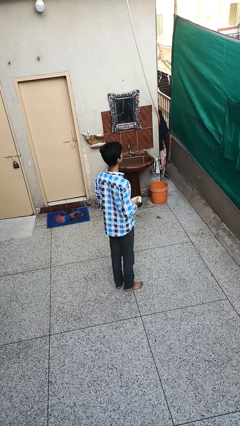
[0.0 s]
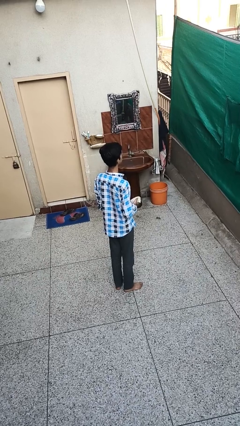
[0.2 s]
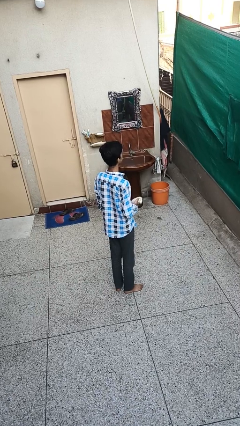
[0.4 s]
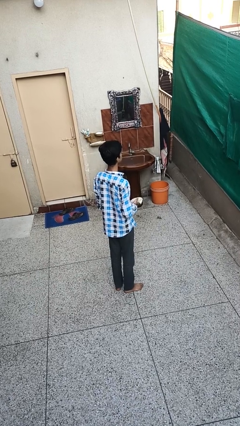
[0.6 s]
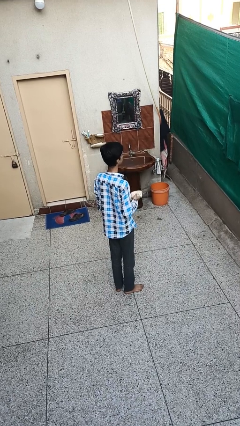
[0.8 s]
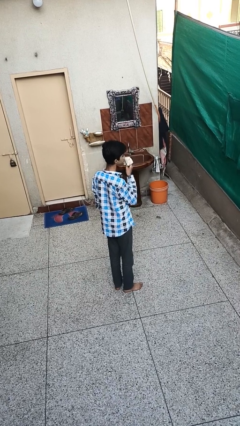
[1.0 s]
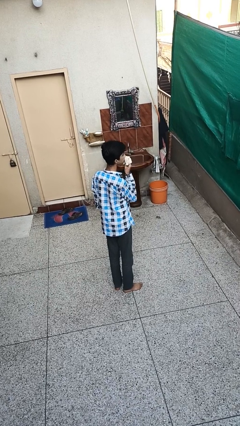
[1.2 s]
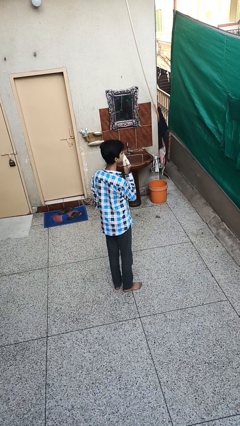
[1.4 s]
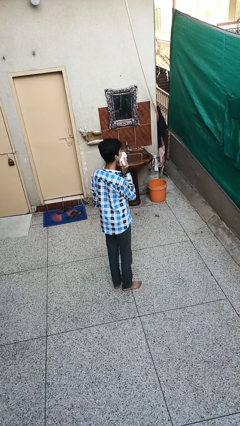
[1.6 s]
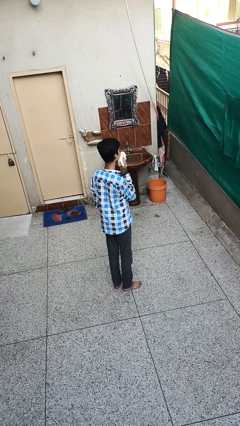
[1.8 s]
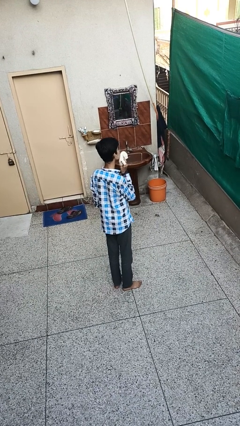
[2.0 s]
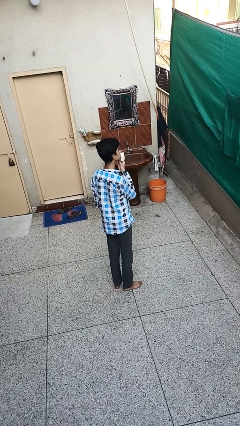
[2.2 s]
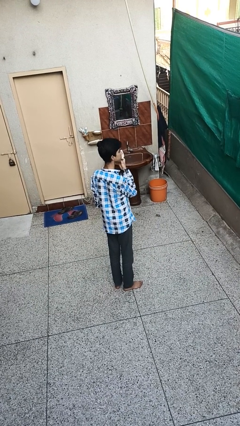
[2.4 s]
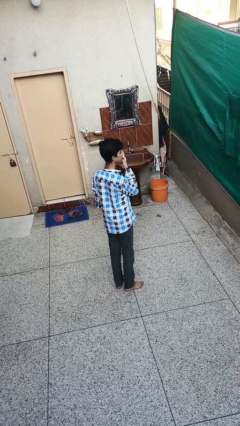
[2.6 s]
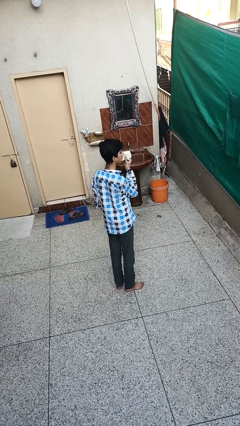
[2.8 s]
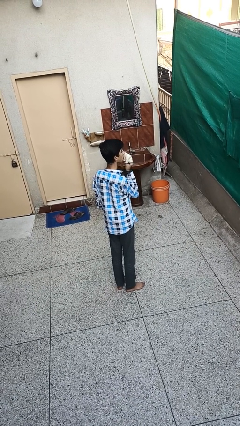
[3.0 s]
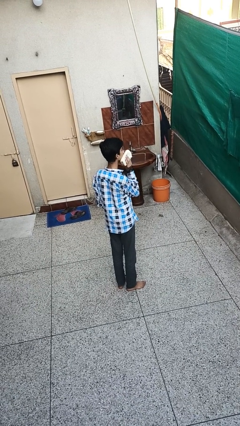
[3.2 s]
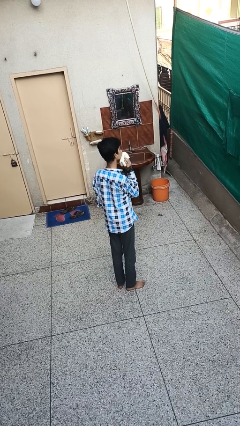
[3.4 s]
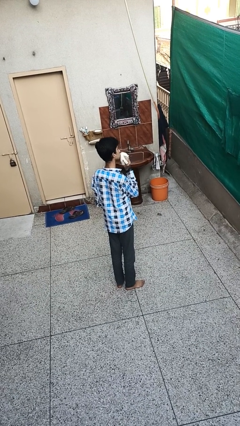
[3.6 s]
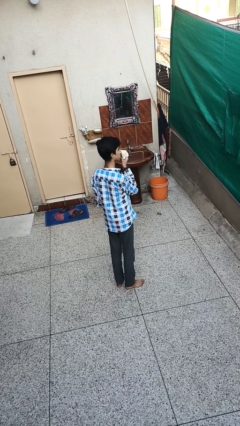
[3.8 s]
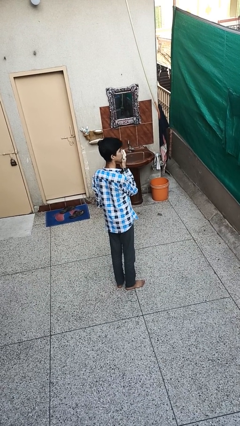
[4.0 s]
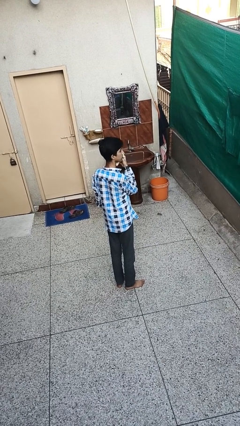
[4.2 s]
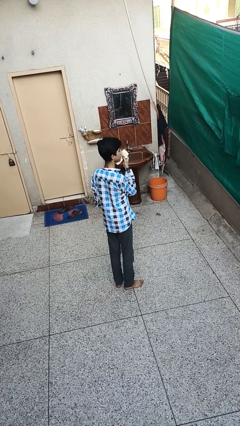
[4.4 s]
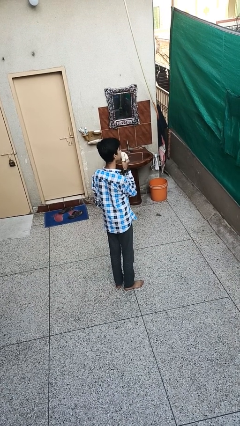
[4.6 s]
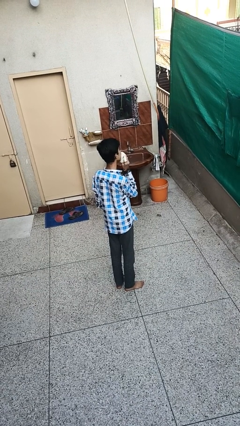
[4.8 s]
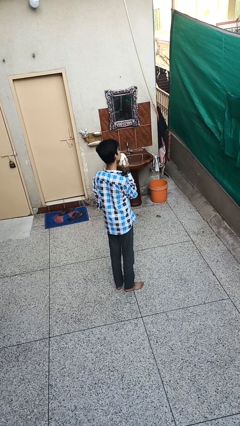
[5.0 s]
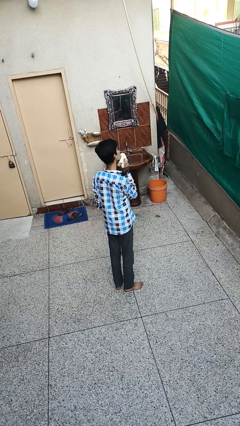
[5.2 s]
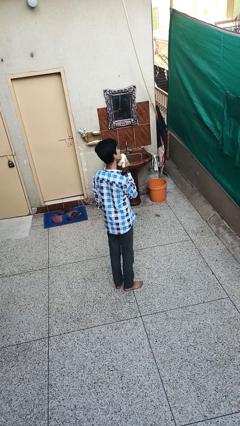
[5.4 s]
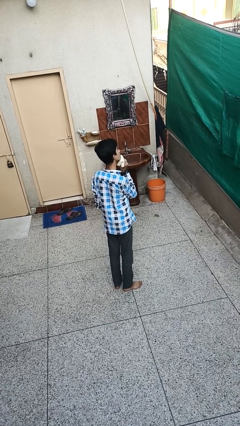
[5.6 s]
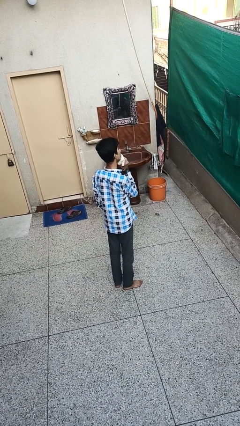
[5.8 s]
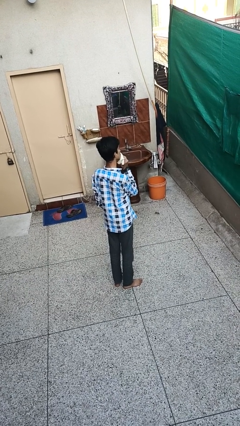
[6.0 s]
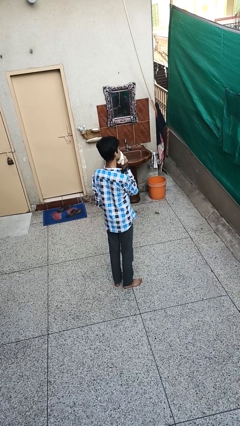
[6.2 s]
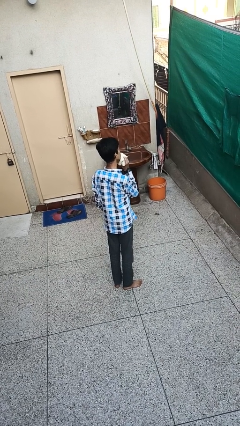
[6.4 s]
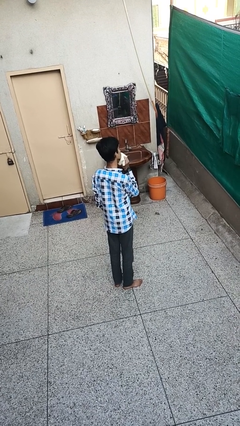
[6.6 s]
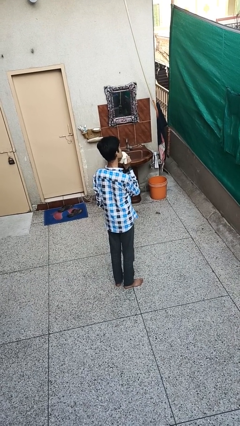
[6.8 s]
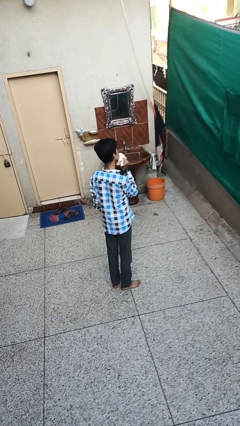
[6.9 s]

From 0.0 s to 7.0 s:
person wipes mouth with napkin

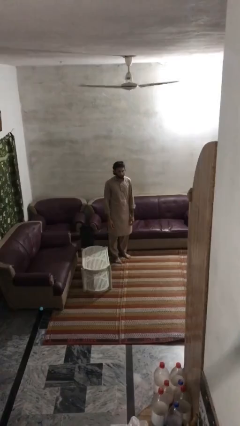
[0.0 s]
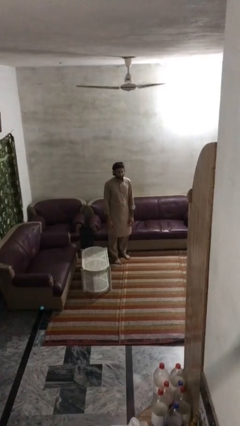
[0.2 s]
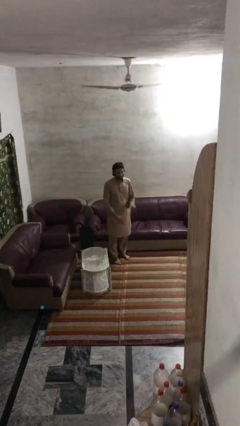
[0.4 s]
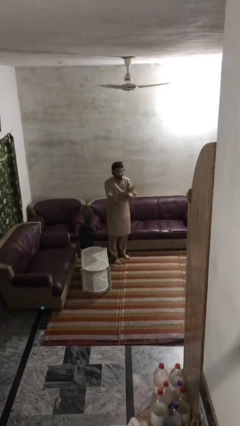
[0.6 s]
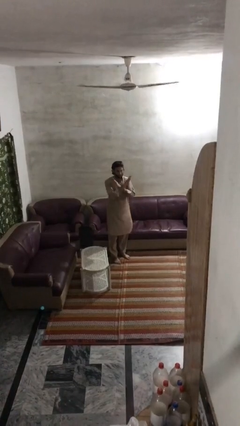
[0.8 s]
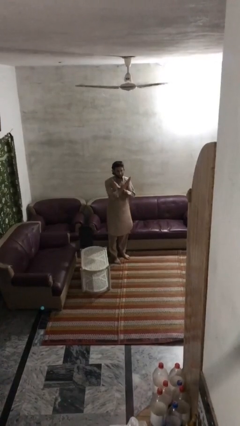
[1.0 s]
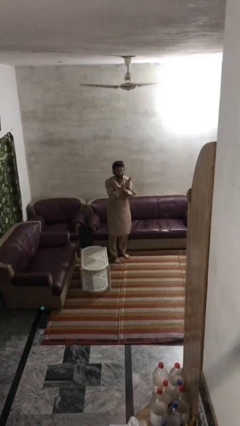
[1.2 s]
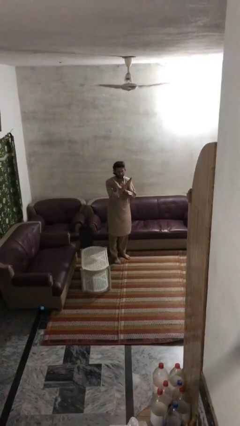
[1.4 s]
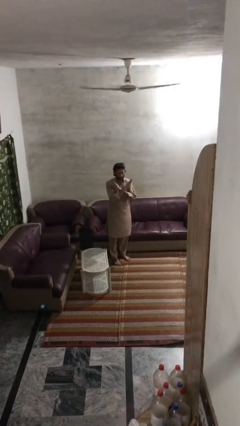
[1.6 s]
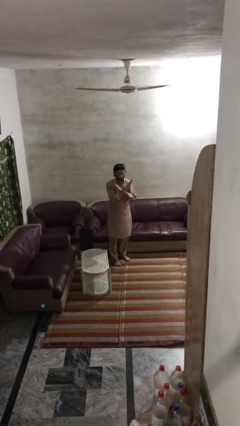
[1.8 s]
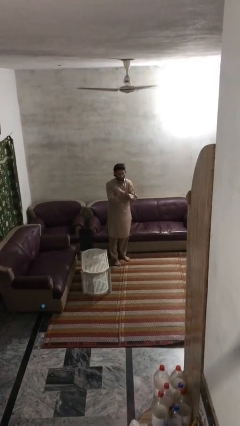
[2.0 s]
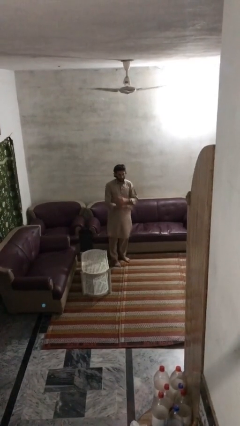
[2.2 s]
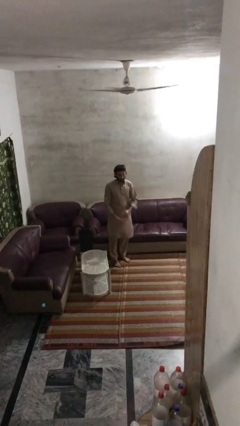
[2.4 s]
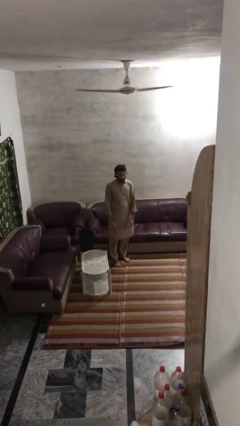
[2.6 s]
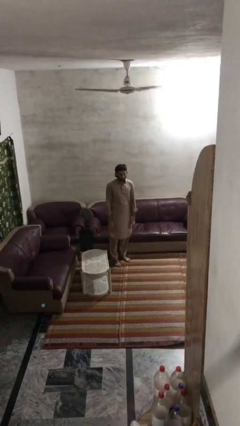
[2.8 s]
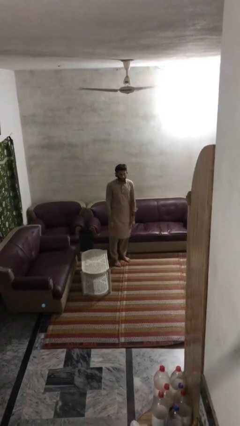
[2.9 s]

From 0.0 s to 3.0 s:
person gestures arms x

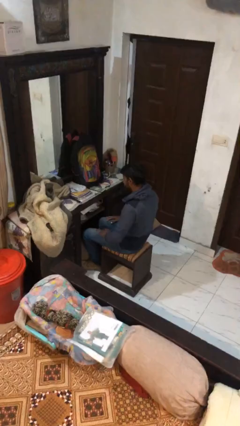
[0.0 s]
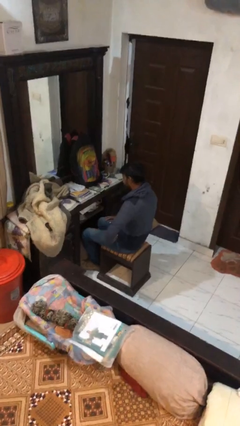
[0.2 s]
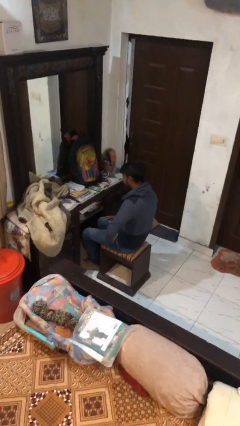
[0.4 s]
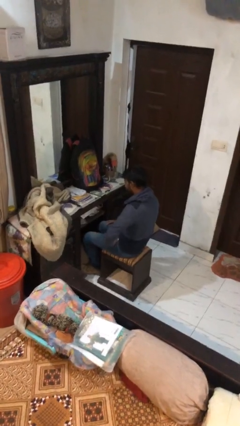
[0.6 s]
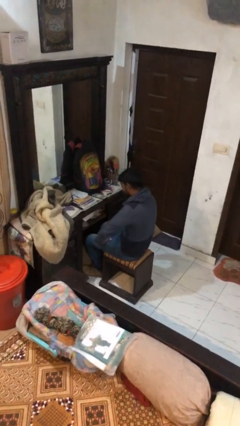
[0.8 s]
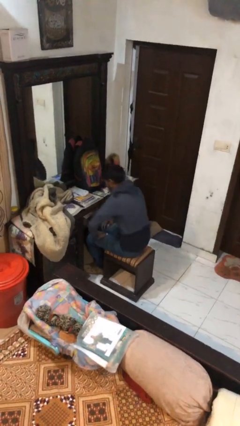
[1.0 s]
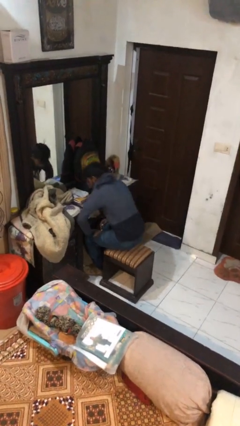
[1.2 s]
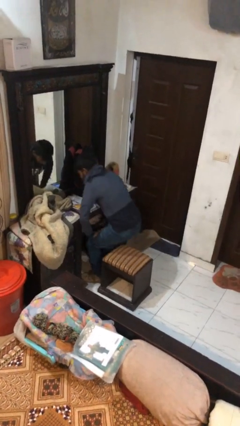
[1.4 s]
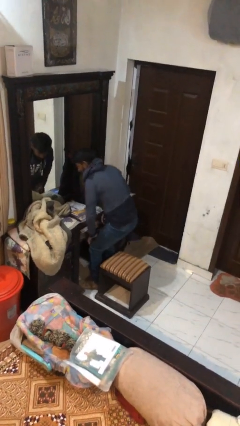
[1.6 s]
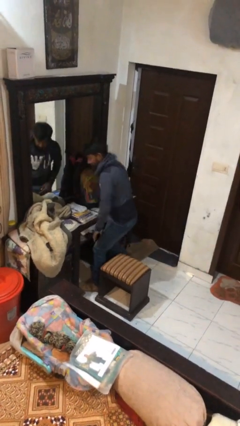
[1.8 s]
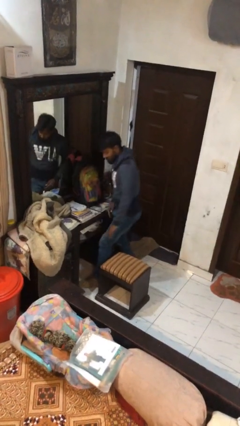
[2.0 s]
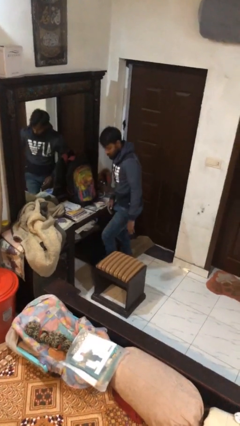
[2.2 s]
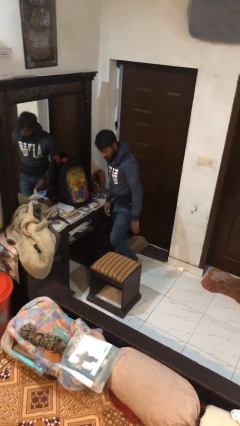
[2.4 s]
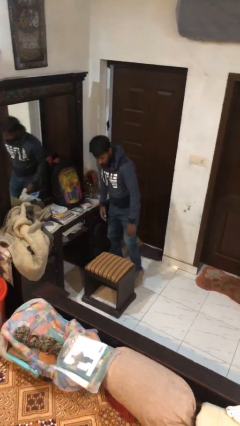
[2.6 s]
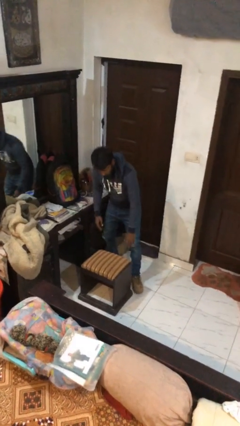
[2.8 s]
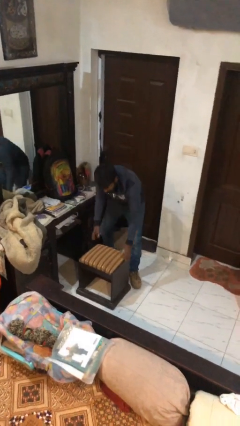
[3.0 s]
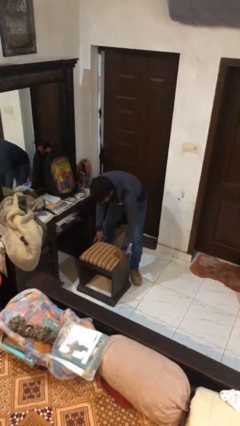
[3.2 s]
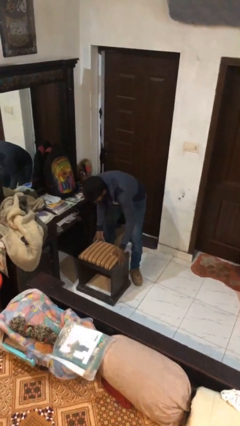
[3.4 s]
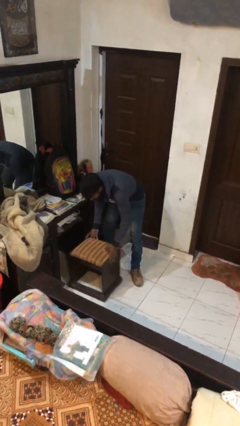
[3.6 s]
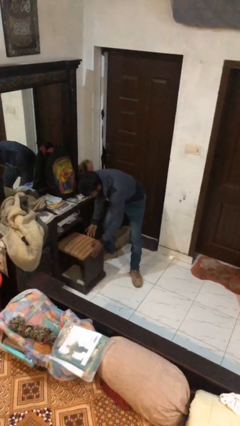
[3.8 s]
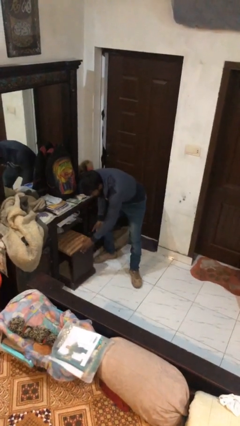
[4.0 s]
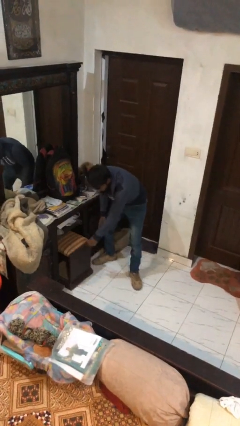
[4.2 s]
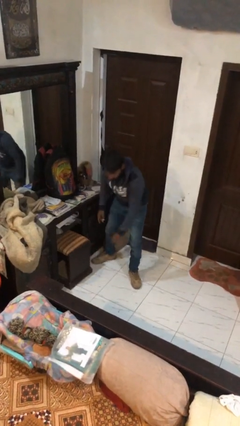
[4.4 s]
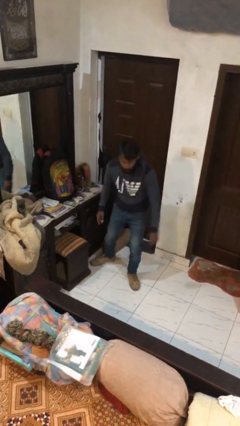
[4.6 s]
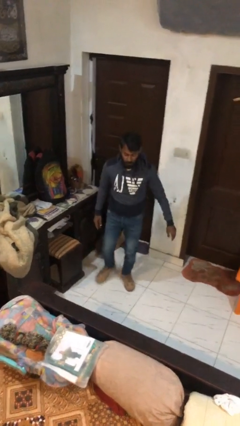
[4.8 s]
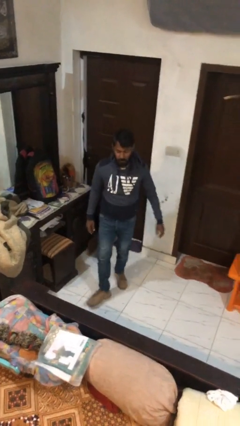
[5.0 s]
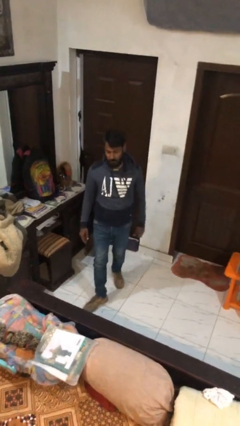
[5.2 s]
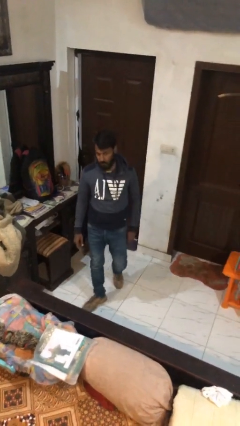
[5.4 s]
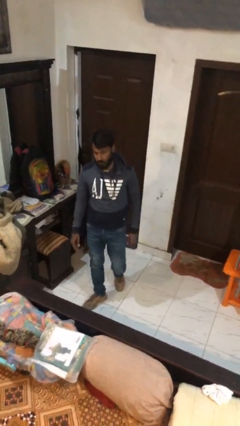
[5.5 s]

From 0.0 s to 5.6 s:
person stands up

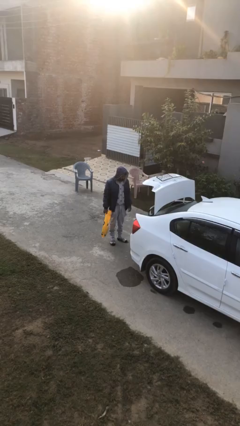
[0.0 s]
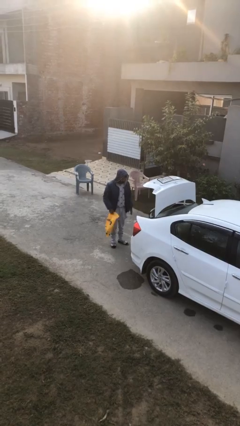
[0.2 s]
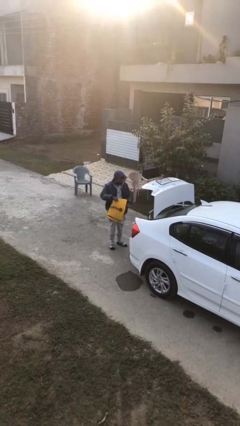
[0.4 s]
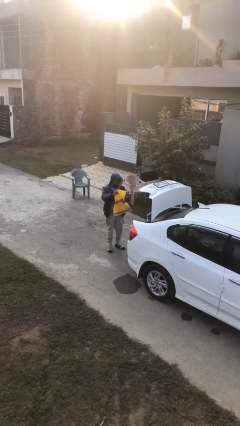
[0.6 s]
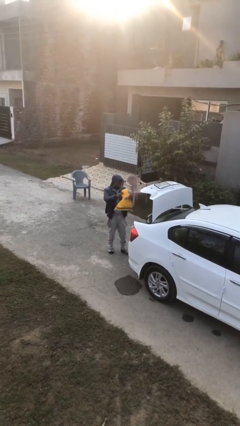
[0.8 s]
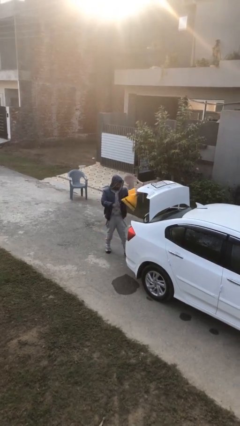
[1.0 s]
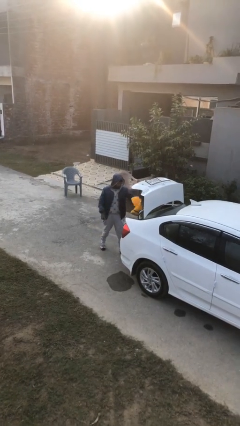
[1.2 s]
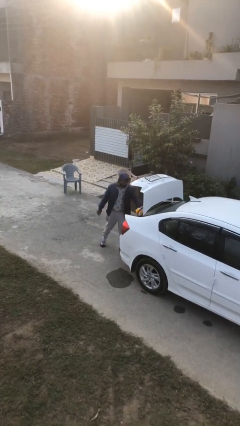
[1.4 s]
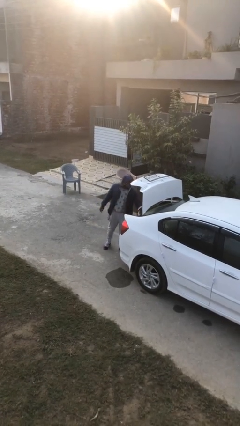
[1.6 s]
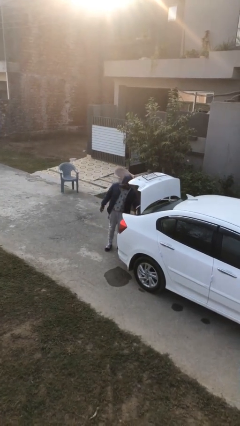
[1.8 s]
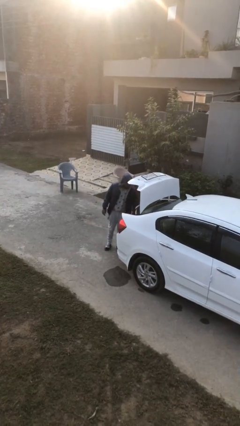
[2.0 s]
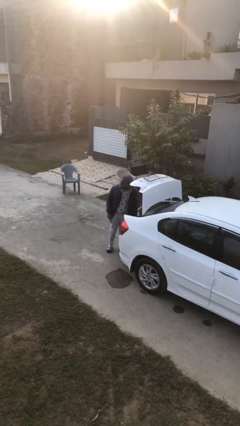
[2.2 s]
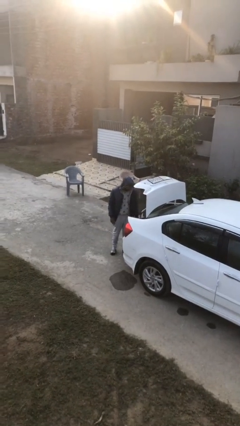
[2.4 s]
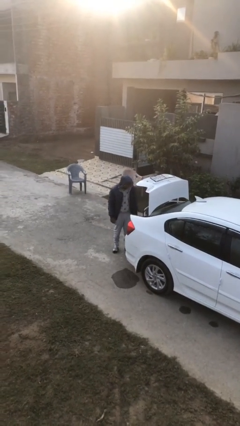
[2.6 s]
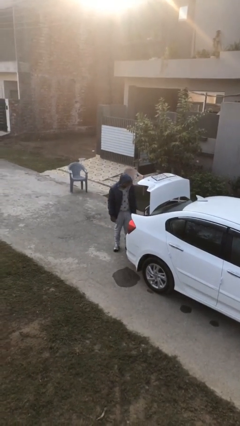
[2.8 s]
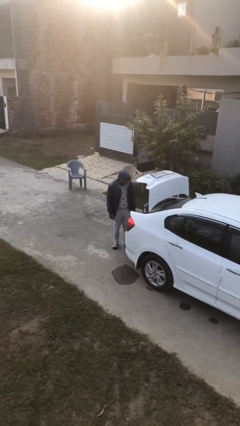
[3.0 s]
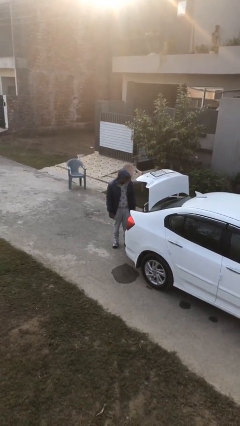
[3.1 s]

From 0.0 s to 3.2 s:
person loads car
